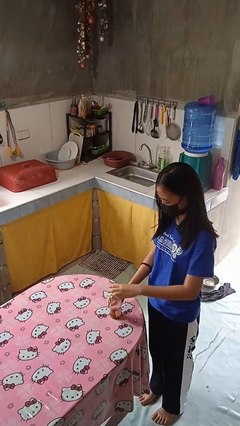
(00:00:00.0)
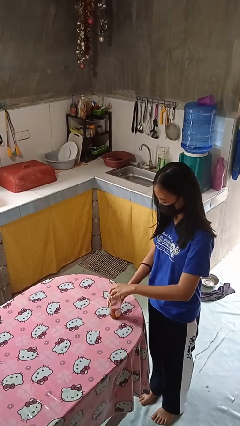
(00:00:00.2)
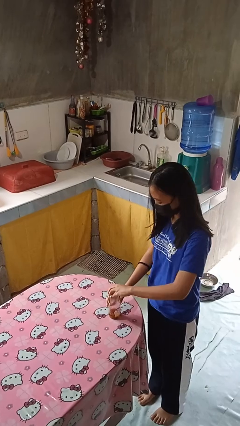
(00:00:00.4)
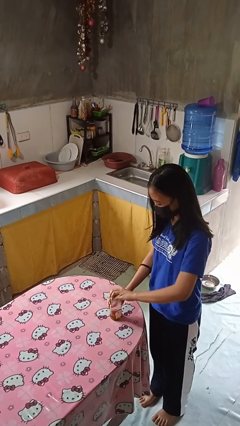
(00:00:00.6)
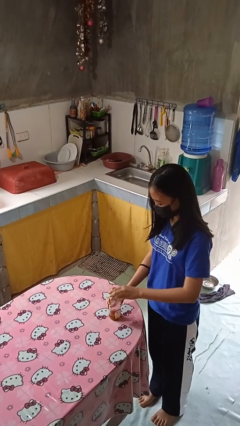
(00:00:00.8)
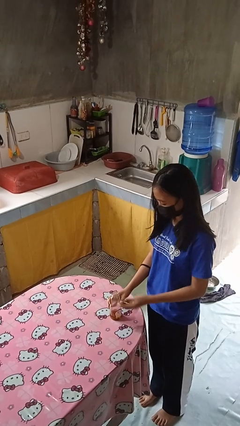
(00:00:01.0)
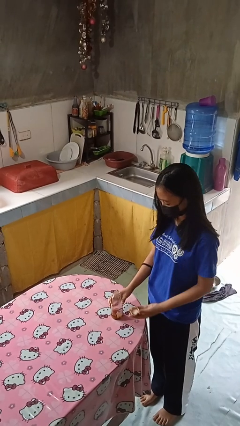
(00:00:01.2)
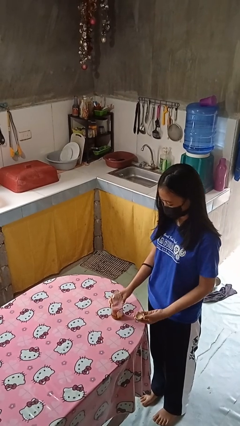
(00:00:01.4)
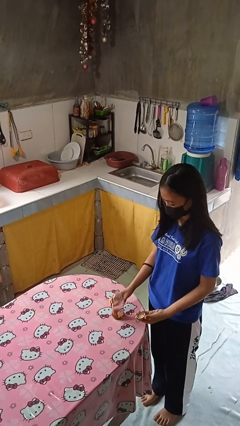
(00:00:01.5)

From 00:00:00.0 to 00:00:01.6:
person opens jar

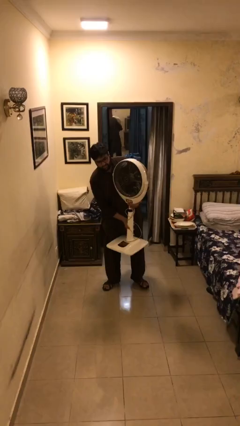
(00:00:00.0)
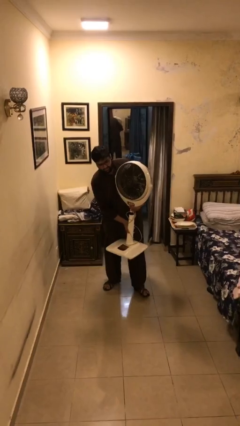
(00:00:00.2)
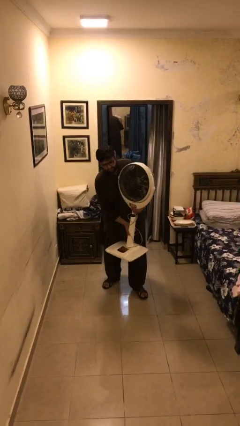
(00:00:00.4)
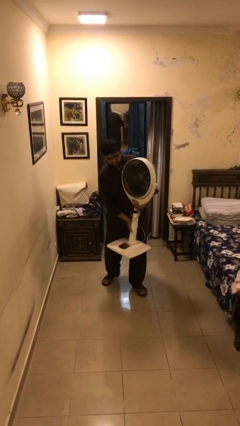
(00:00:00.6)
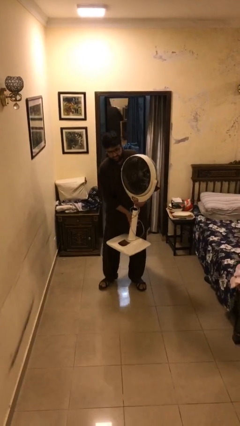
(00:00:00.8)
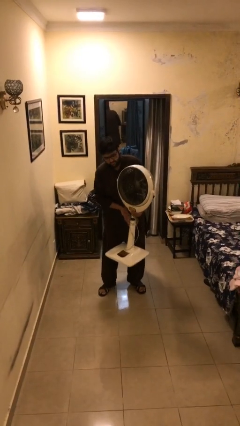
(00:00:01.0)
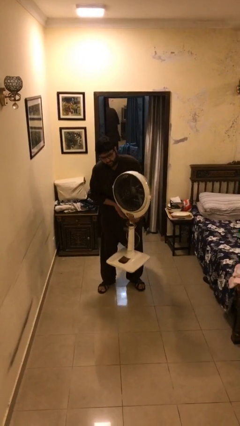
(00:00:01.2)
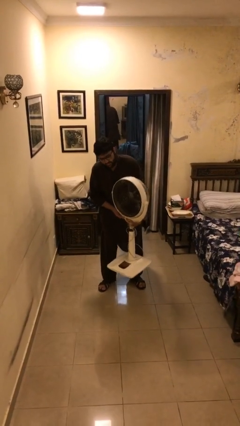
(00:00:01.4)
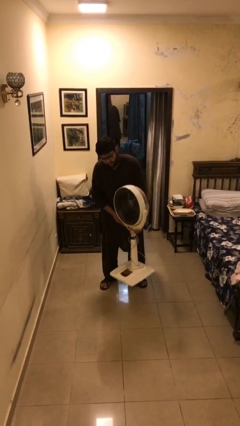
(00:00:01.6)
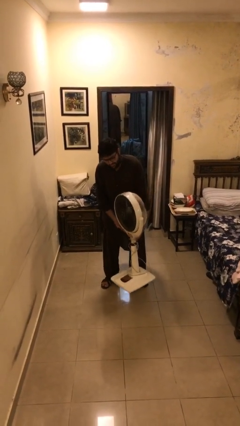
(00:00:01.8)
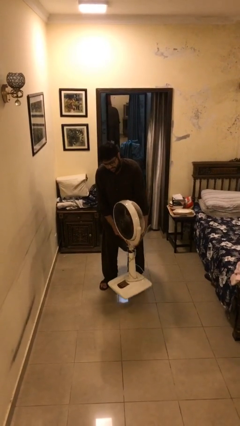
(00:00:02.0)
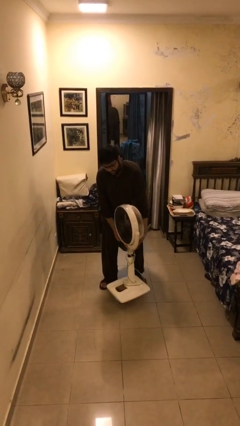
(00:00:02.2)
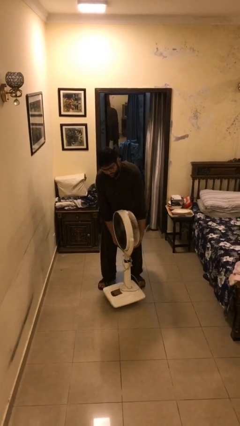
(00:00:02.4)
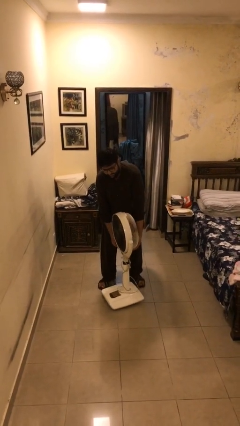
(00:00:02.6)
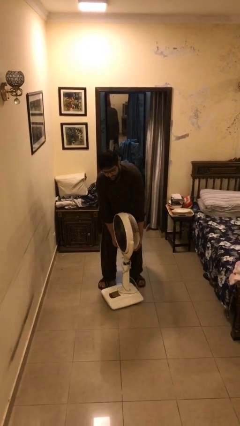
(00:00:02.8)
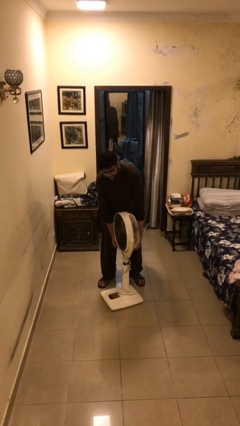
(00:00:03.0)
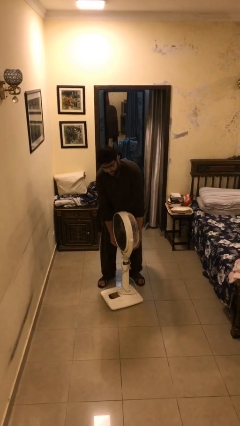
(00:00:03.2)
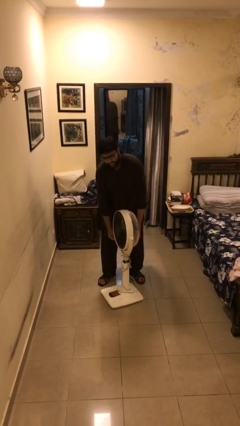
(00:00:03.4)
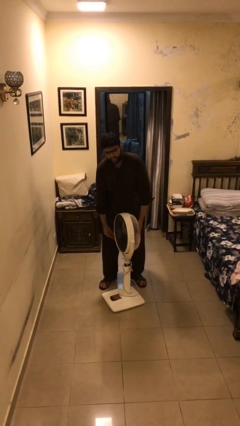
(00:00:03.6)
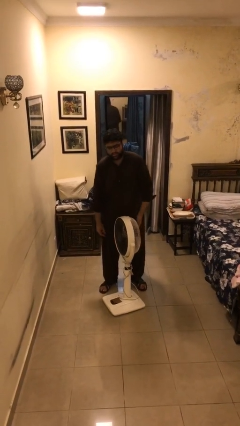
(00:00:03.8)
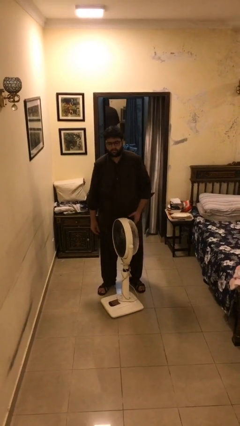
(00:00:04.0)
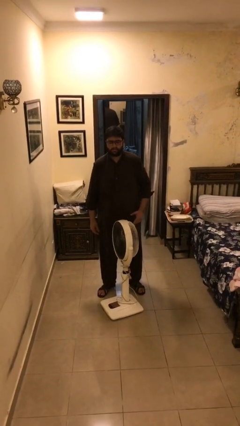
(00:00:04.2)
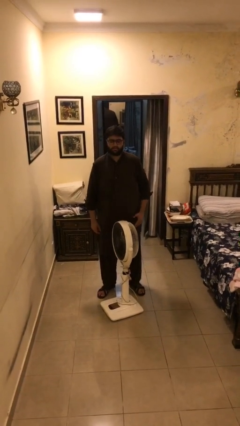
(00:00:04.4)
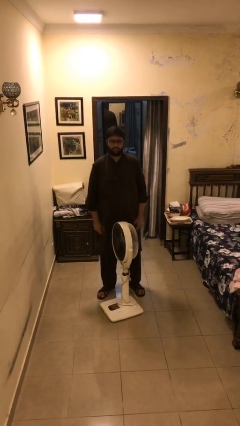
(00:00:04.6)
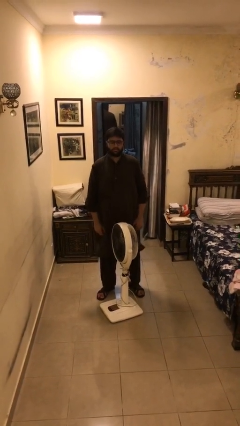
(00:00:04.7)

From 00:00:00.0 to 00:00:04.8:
person puts down object on floor

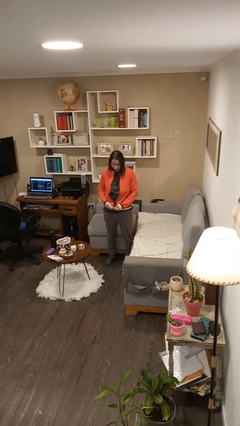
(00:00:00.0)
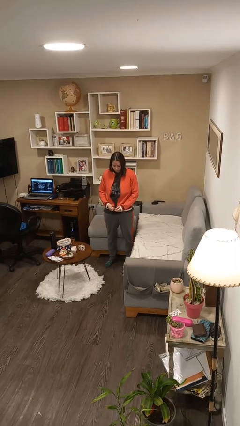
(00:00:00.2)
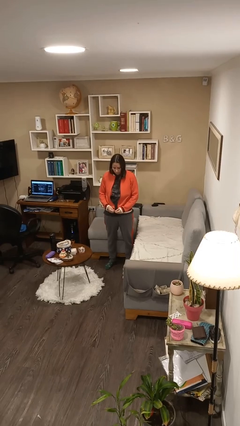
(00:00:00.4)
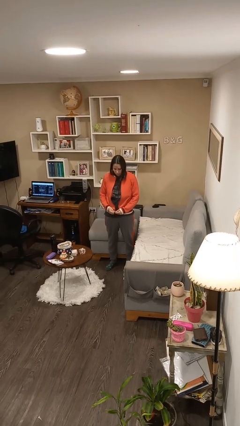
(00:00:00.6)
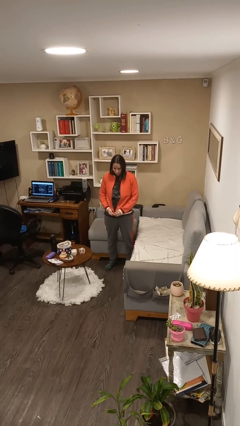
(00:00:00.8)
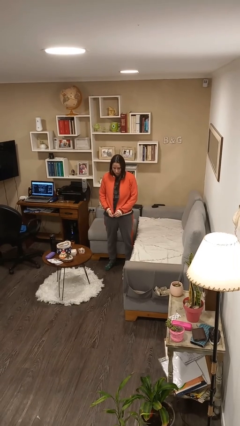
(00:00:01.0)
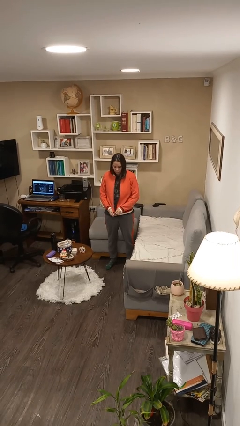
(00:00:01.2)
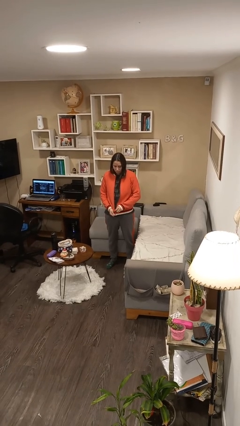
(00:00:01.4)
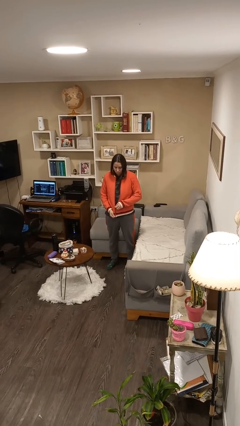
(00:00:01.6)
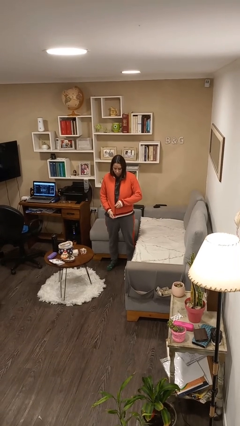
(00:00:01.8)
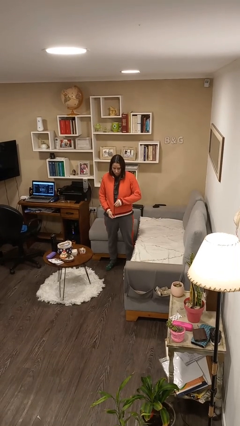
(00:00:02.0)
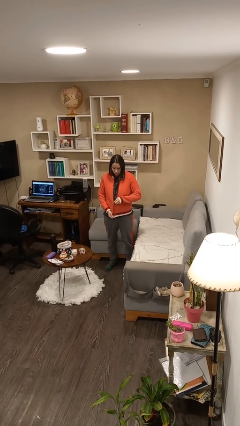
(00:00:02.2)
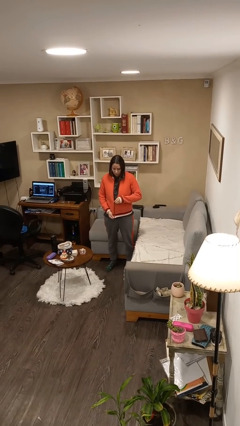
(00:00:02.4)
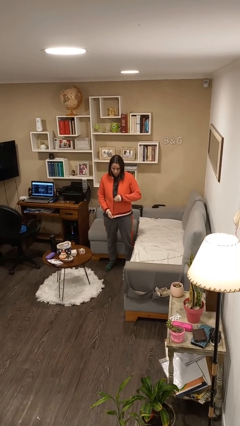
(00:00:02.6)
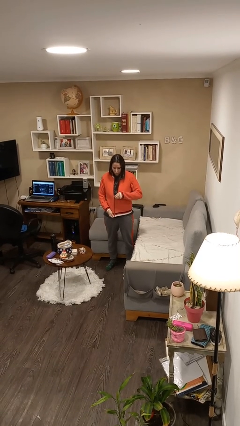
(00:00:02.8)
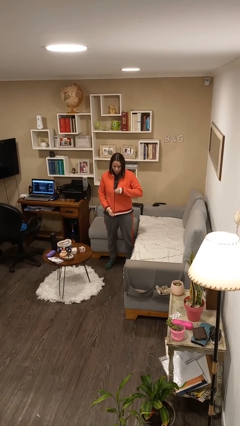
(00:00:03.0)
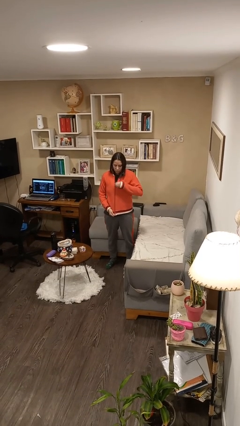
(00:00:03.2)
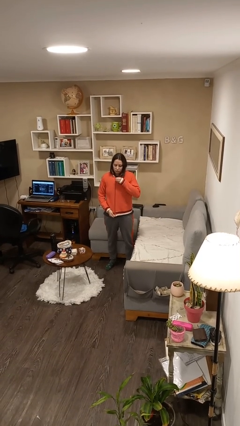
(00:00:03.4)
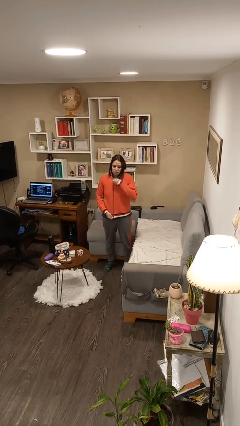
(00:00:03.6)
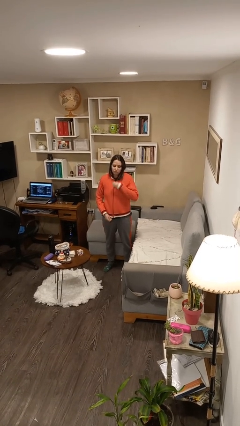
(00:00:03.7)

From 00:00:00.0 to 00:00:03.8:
person zips up jacket

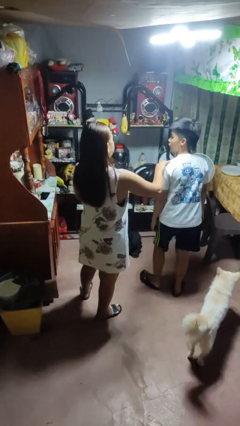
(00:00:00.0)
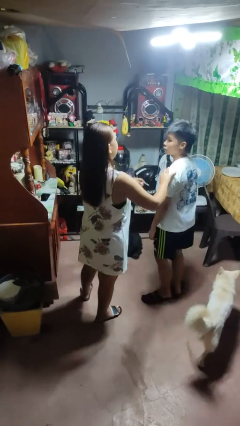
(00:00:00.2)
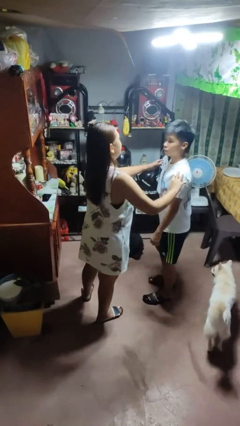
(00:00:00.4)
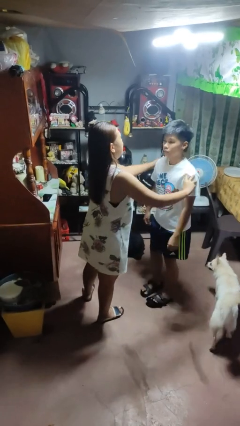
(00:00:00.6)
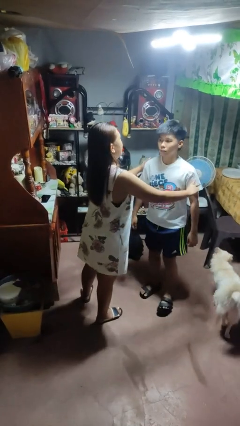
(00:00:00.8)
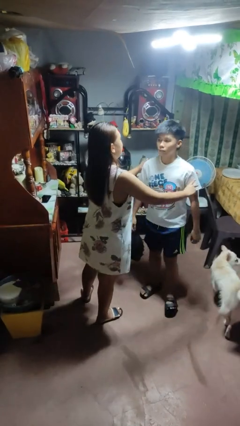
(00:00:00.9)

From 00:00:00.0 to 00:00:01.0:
person spins person around

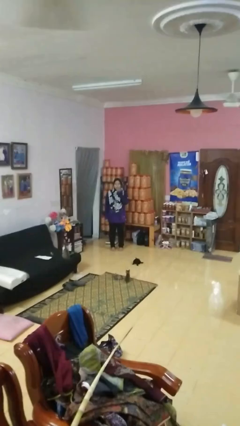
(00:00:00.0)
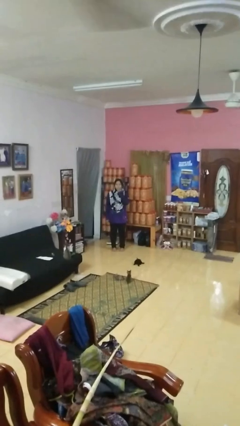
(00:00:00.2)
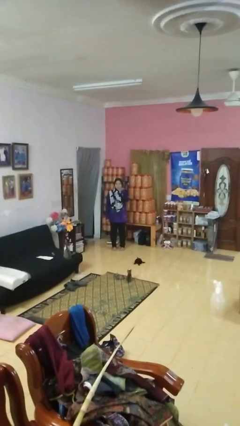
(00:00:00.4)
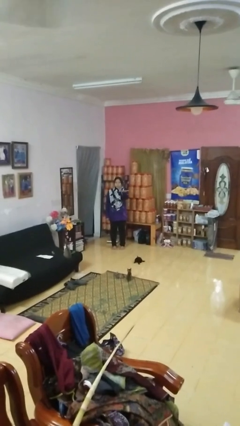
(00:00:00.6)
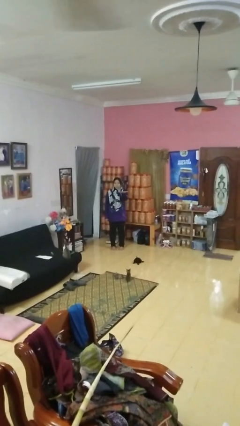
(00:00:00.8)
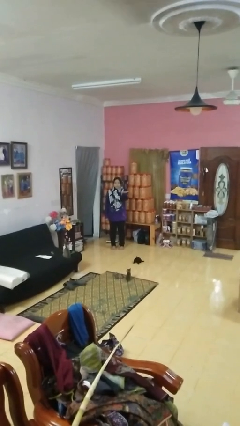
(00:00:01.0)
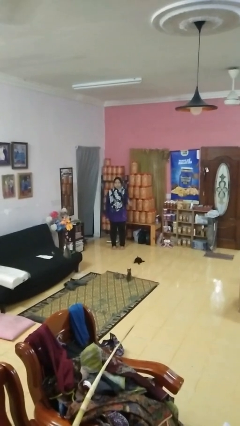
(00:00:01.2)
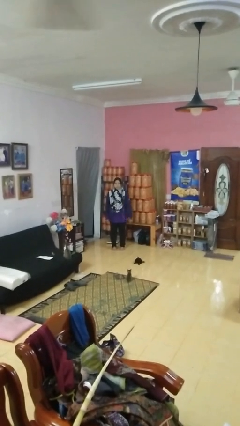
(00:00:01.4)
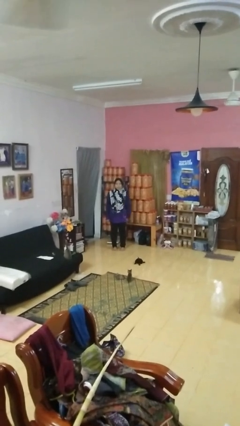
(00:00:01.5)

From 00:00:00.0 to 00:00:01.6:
person gestures blow kiss

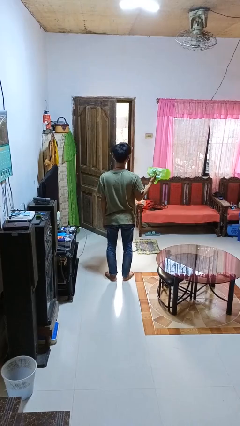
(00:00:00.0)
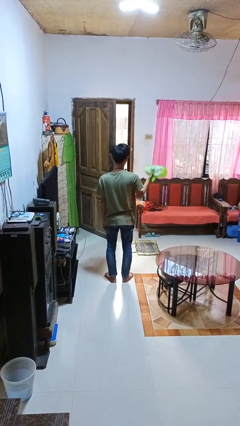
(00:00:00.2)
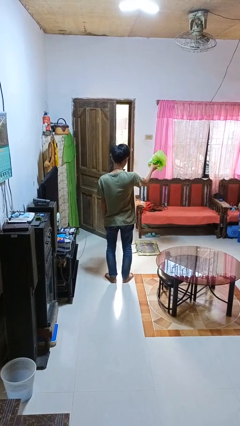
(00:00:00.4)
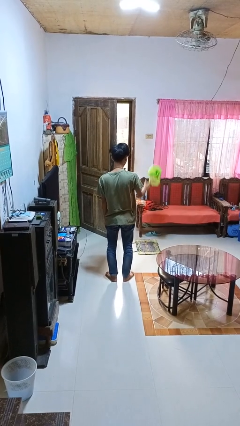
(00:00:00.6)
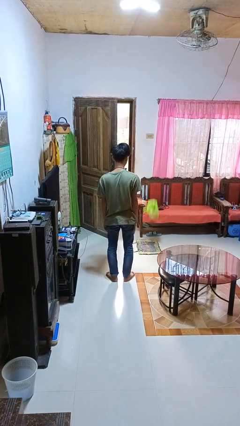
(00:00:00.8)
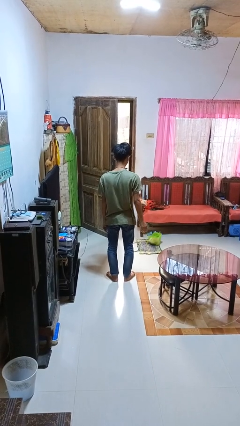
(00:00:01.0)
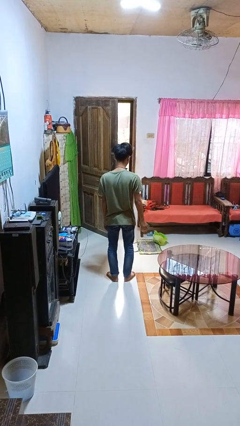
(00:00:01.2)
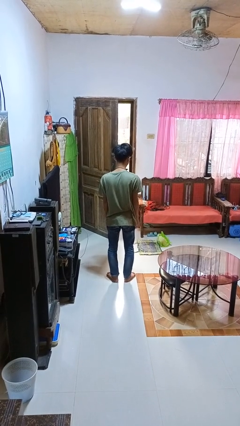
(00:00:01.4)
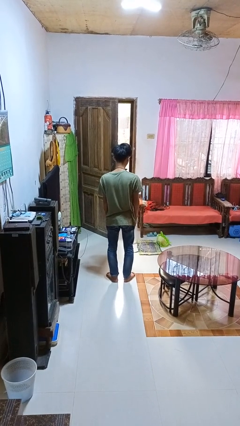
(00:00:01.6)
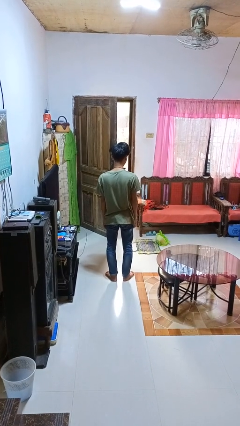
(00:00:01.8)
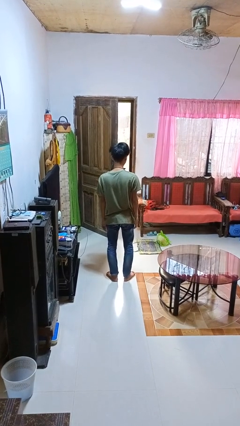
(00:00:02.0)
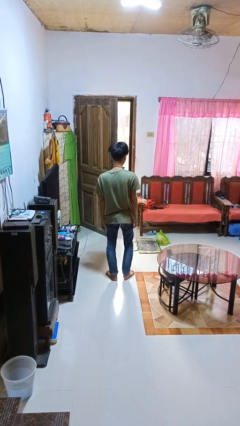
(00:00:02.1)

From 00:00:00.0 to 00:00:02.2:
person throws object to ground

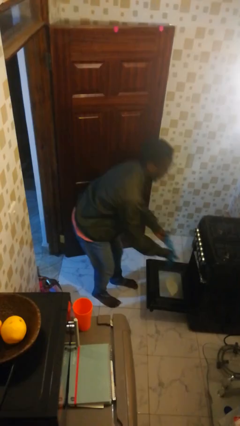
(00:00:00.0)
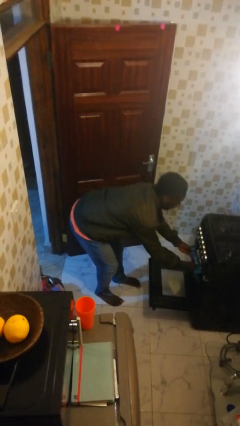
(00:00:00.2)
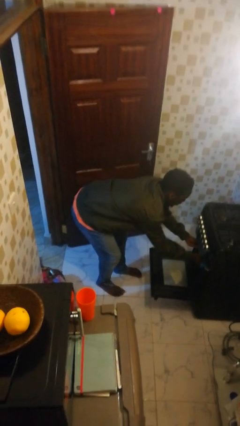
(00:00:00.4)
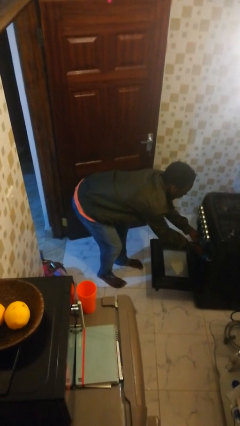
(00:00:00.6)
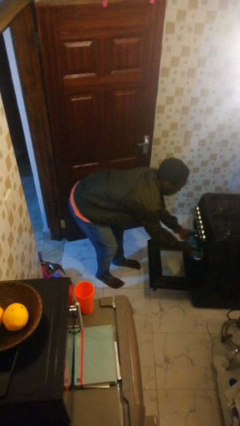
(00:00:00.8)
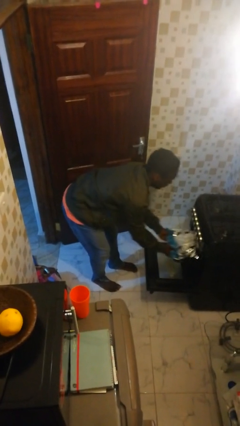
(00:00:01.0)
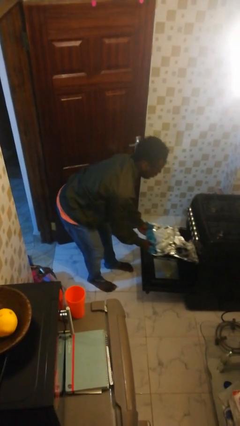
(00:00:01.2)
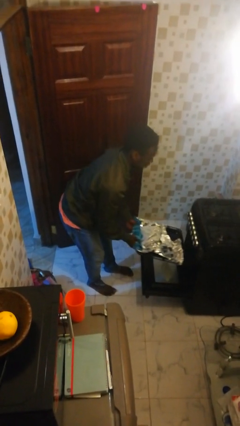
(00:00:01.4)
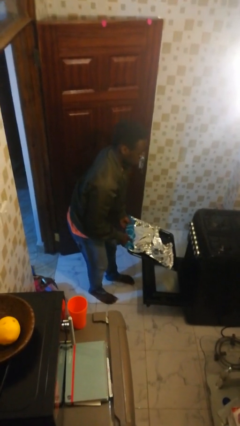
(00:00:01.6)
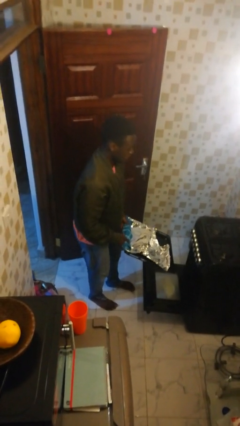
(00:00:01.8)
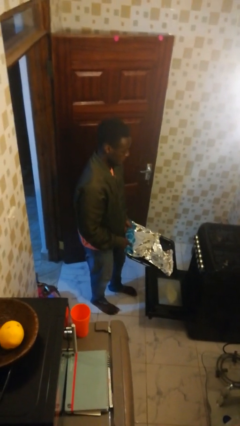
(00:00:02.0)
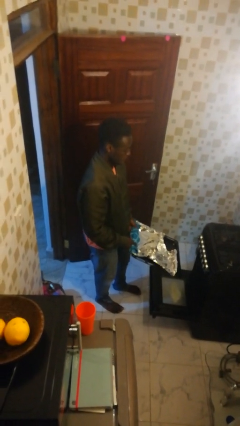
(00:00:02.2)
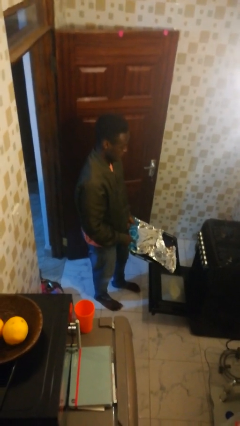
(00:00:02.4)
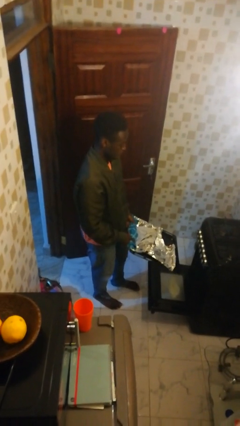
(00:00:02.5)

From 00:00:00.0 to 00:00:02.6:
person takes object from oven
